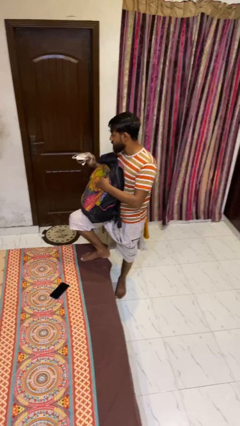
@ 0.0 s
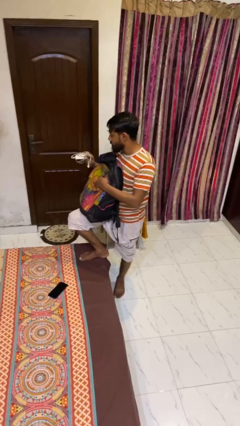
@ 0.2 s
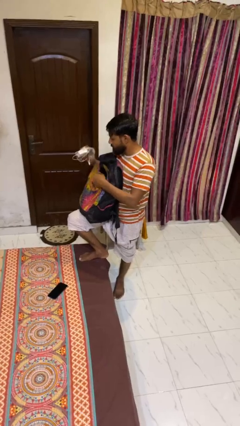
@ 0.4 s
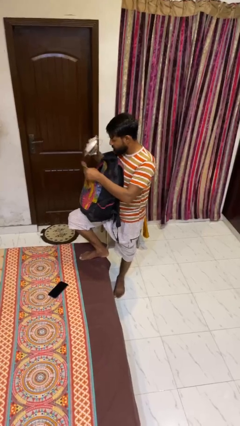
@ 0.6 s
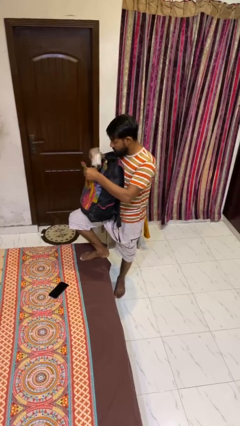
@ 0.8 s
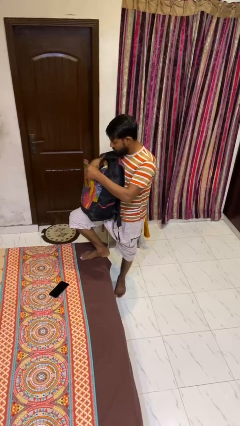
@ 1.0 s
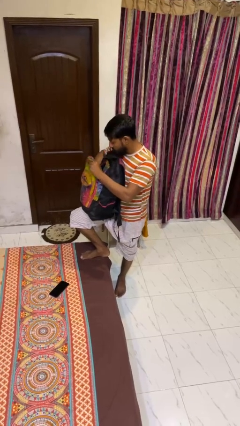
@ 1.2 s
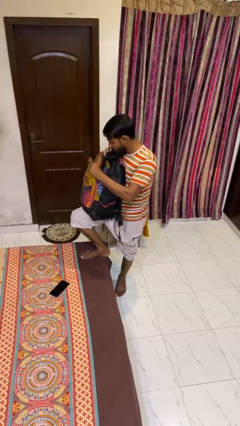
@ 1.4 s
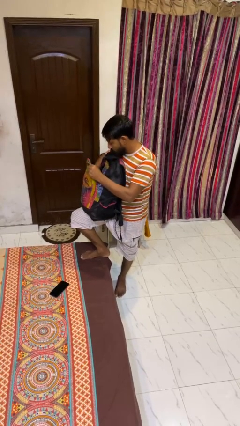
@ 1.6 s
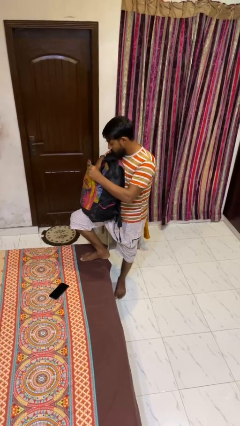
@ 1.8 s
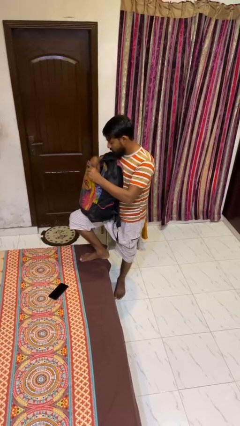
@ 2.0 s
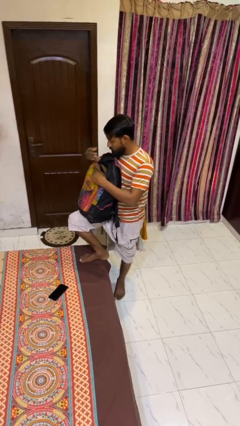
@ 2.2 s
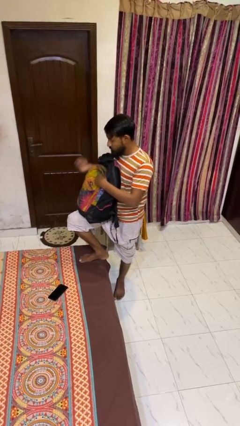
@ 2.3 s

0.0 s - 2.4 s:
person puts object into backpack

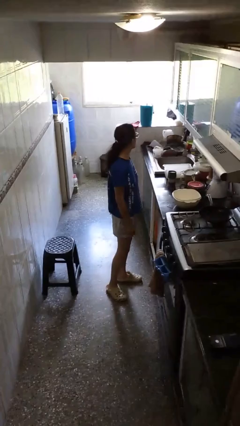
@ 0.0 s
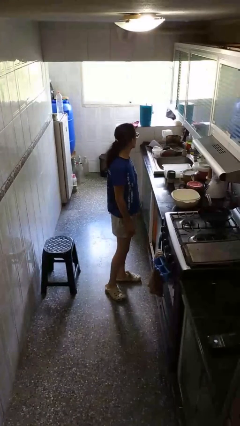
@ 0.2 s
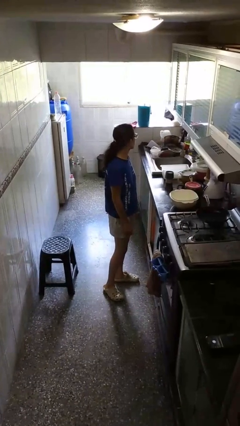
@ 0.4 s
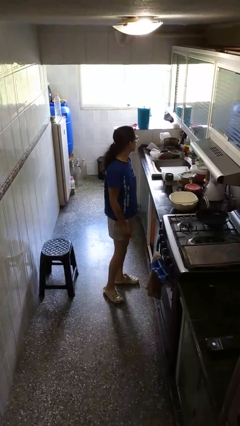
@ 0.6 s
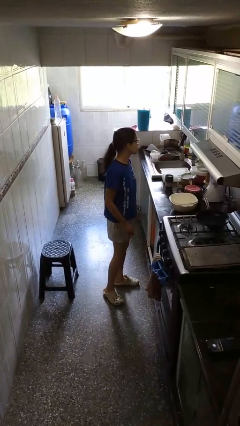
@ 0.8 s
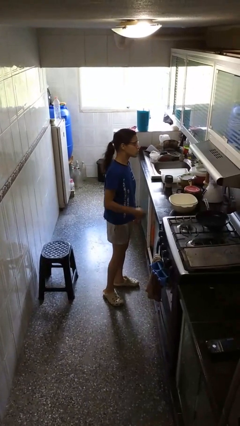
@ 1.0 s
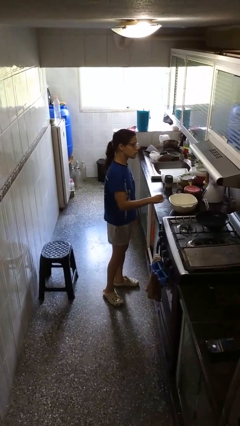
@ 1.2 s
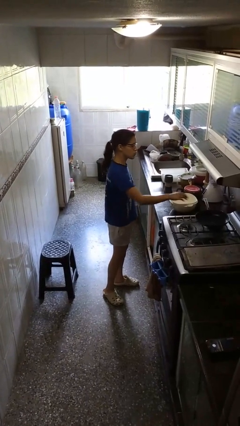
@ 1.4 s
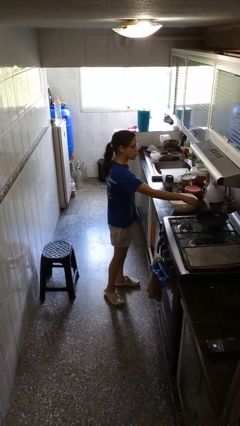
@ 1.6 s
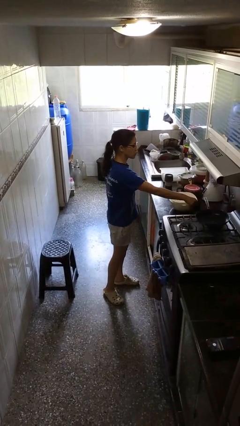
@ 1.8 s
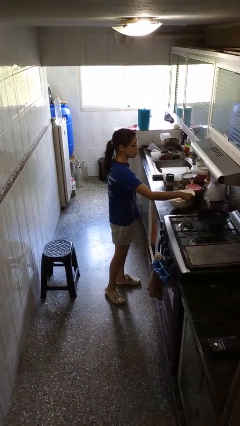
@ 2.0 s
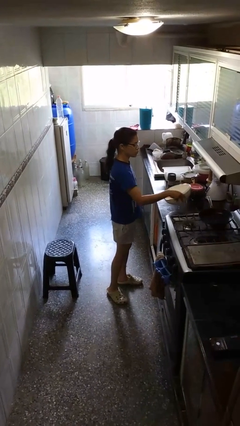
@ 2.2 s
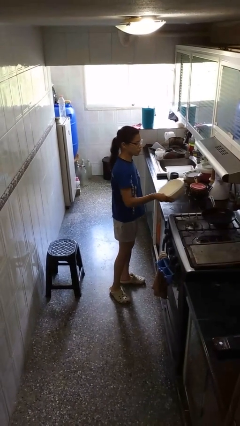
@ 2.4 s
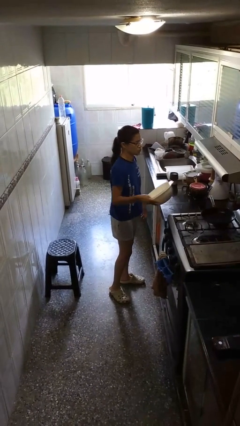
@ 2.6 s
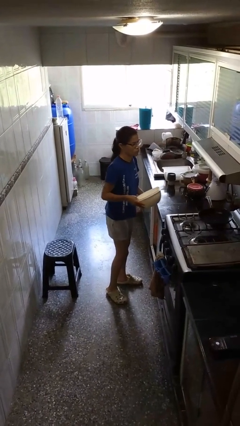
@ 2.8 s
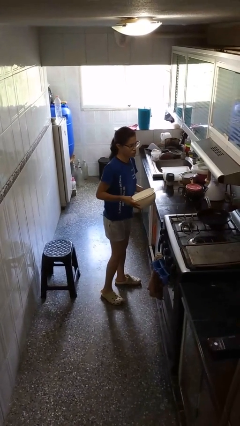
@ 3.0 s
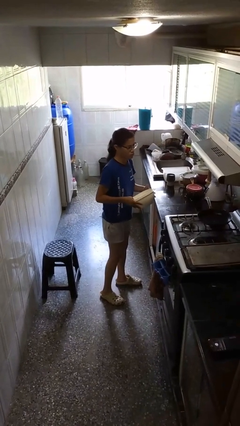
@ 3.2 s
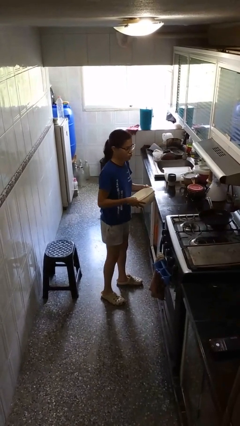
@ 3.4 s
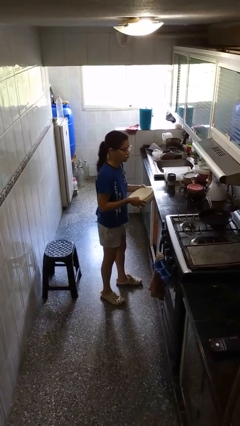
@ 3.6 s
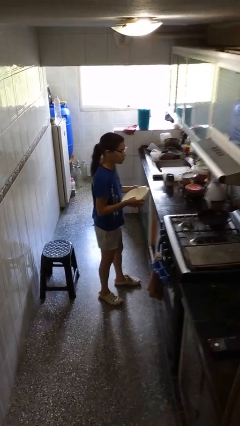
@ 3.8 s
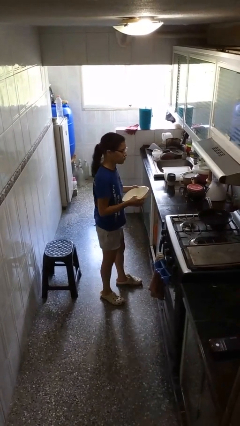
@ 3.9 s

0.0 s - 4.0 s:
person picks up object from countertop

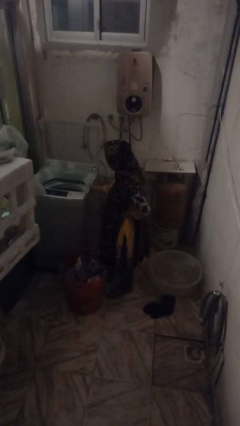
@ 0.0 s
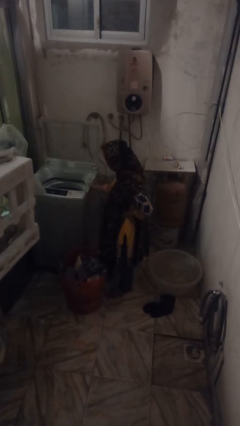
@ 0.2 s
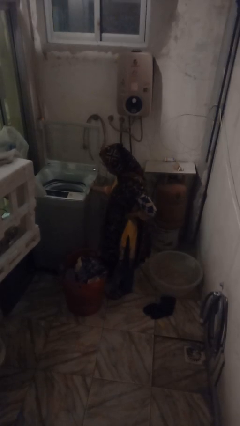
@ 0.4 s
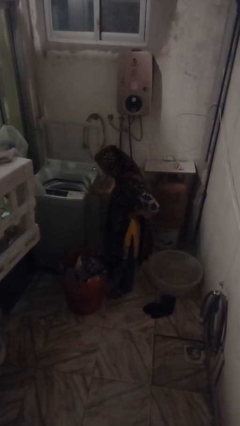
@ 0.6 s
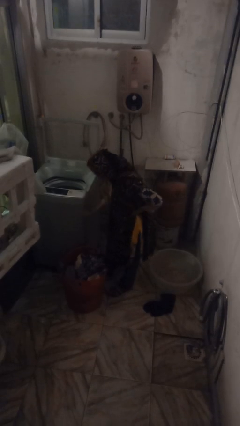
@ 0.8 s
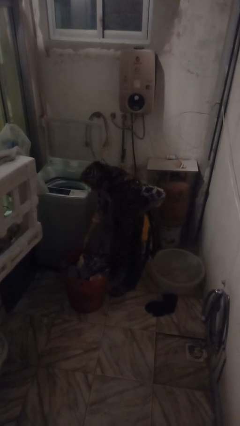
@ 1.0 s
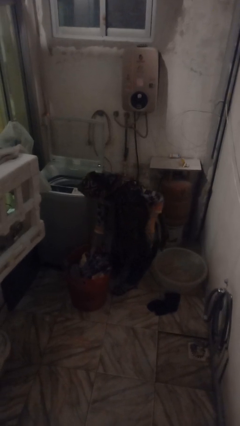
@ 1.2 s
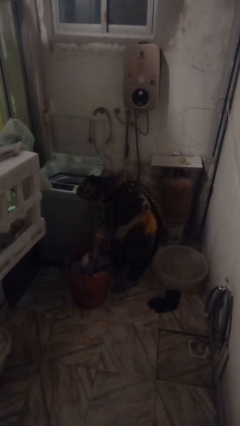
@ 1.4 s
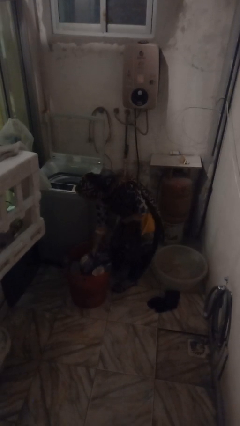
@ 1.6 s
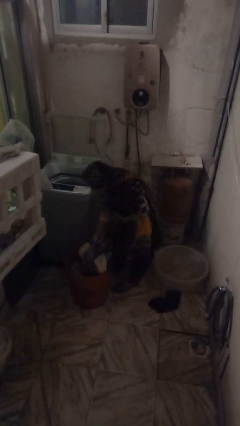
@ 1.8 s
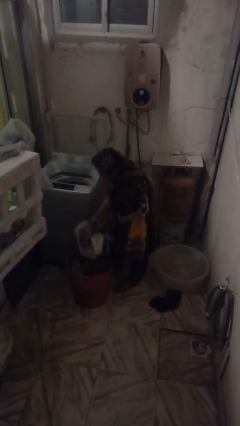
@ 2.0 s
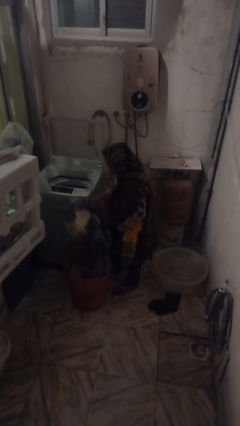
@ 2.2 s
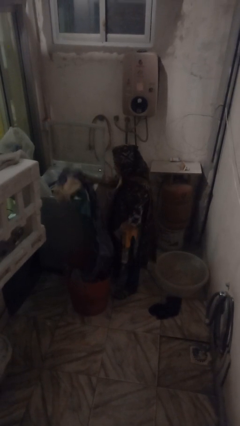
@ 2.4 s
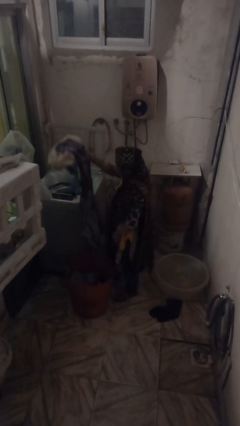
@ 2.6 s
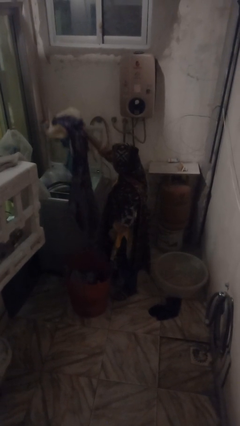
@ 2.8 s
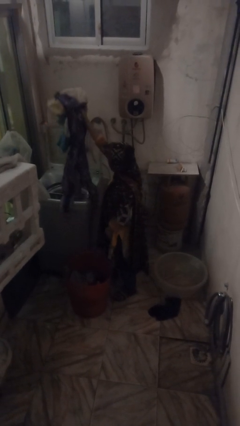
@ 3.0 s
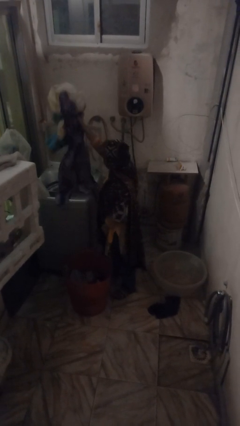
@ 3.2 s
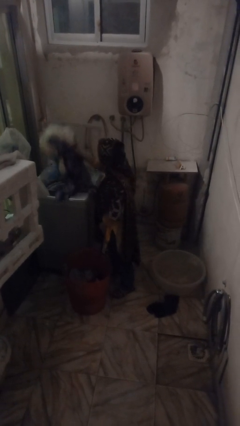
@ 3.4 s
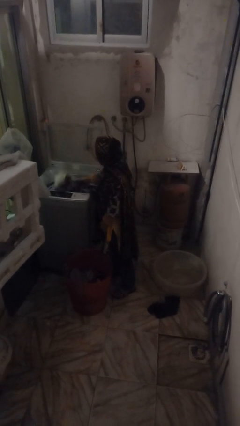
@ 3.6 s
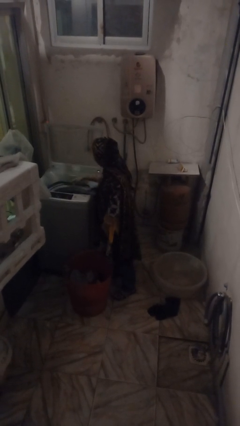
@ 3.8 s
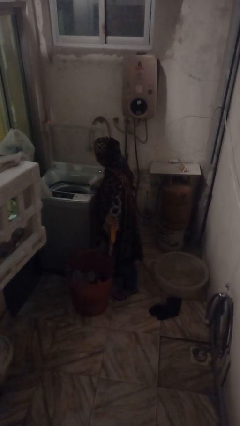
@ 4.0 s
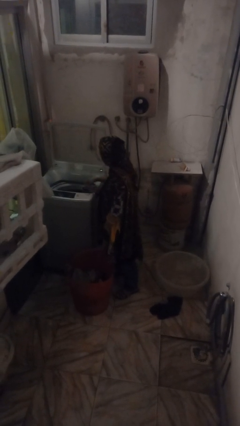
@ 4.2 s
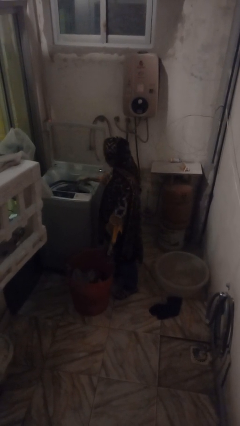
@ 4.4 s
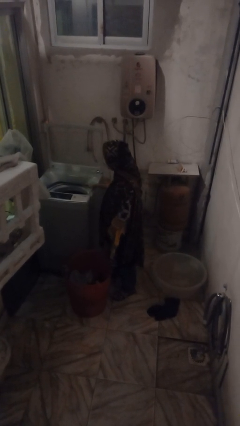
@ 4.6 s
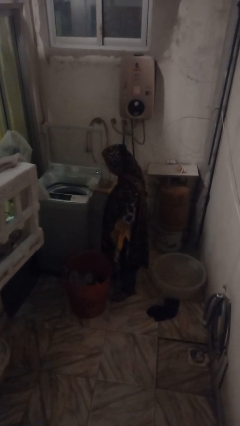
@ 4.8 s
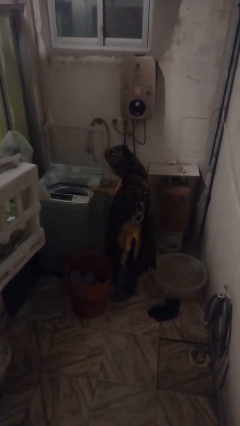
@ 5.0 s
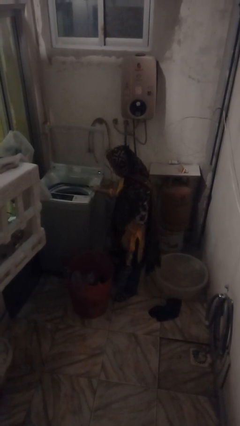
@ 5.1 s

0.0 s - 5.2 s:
person loads clotheswasher

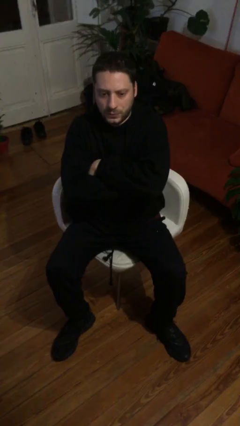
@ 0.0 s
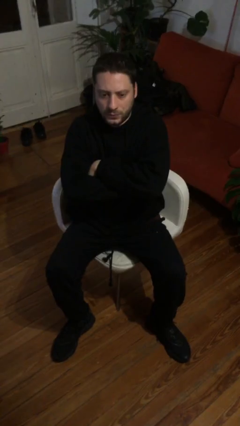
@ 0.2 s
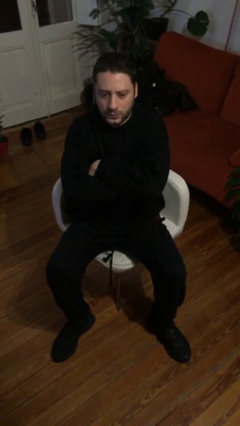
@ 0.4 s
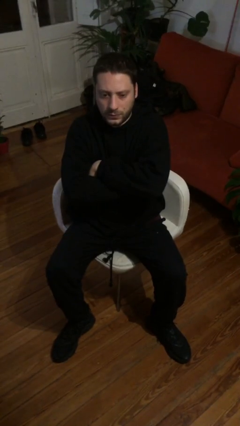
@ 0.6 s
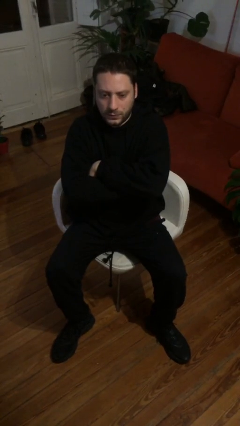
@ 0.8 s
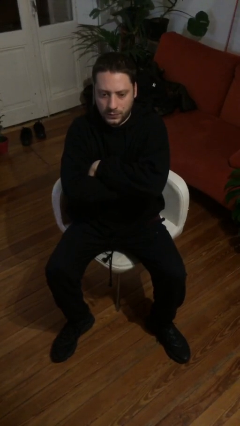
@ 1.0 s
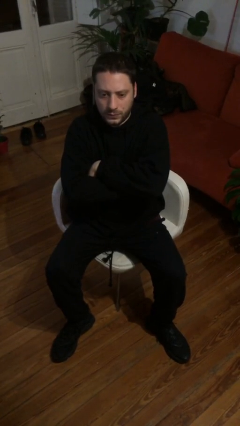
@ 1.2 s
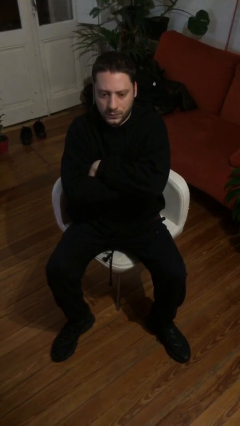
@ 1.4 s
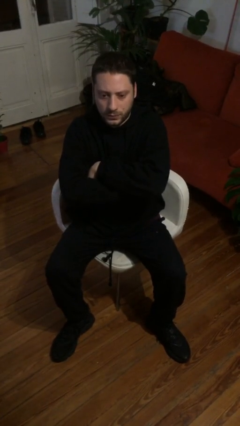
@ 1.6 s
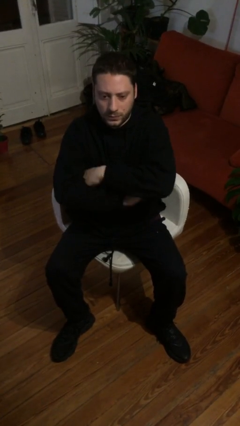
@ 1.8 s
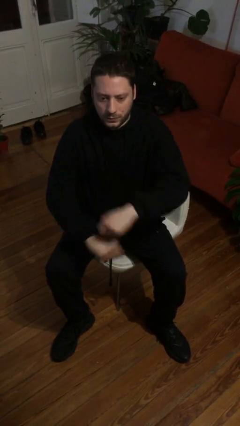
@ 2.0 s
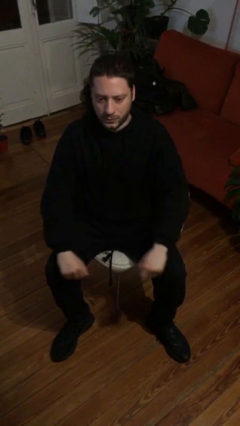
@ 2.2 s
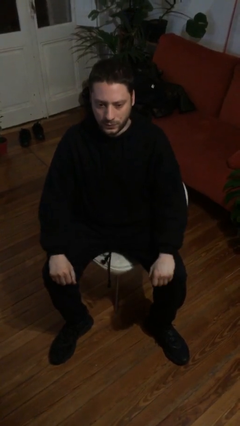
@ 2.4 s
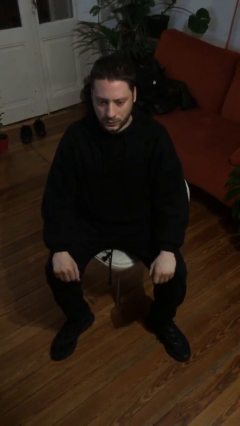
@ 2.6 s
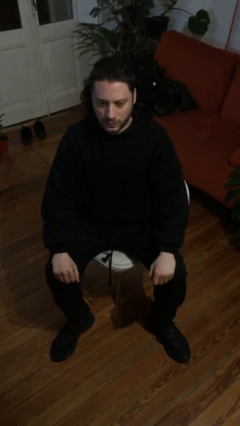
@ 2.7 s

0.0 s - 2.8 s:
person crosses arms

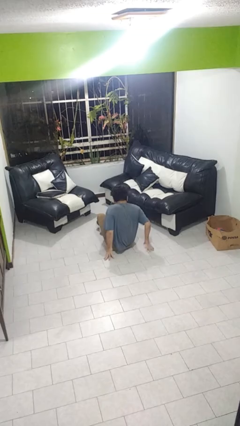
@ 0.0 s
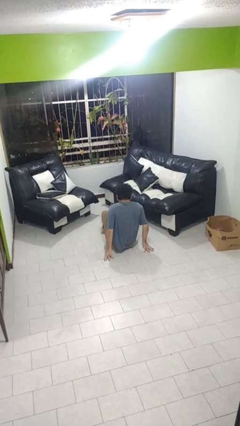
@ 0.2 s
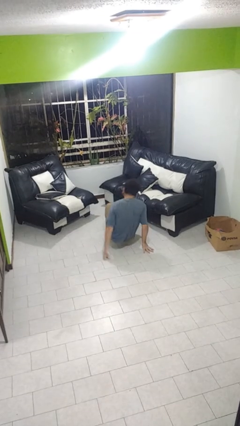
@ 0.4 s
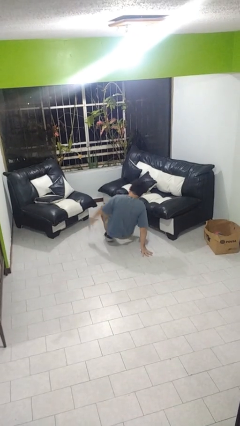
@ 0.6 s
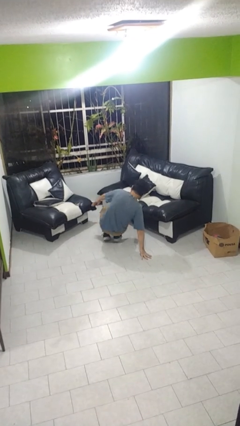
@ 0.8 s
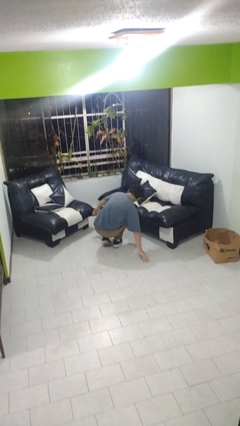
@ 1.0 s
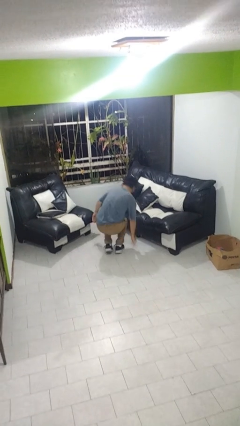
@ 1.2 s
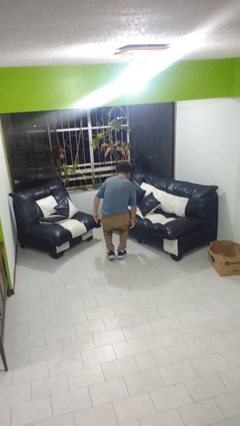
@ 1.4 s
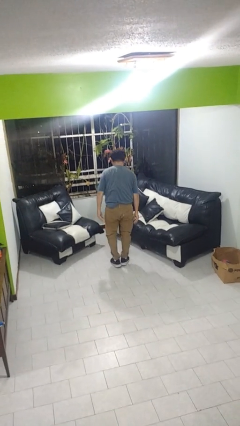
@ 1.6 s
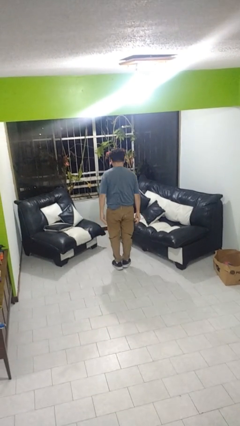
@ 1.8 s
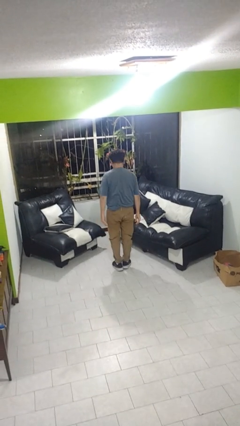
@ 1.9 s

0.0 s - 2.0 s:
person stands up from floor

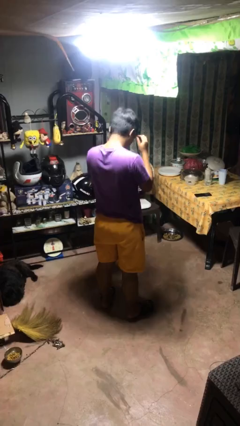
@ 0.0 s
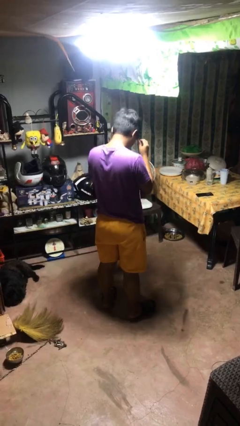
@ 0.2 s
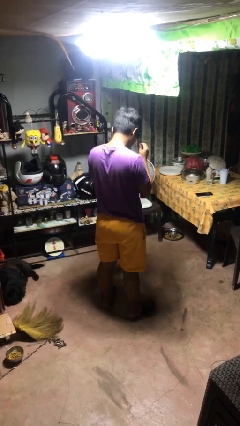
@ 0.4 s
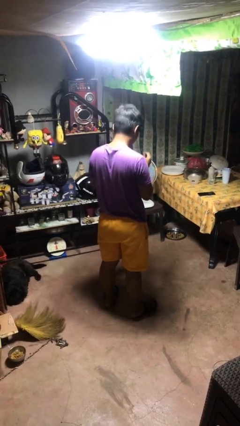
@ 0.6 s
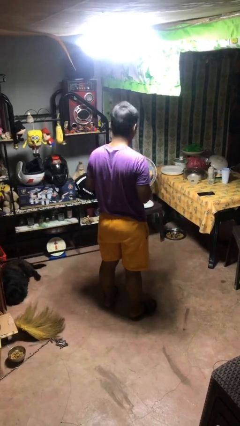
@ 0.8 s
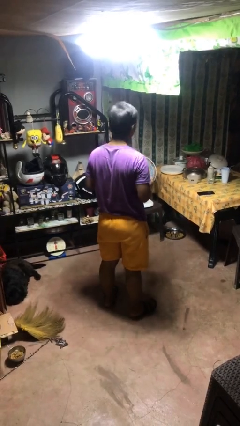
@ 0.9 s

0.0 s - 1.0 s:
person takes off glasses
